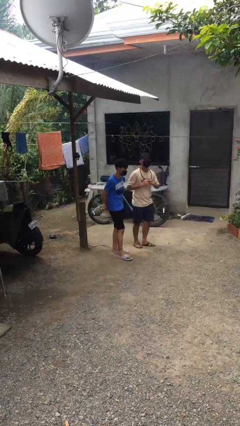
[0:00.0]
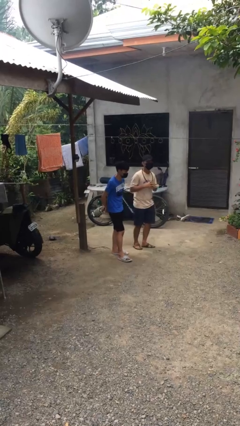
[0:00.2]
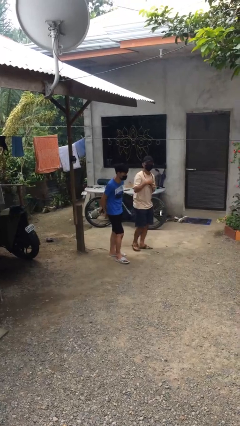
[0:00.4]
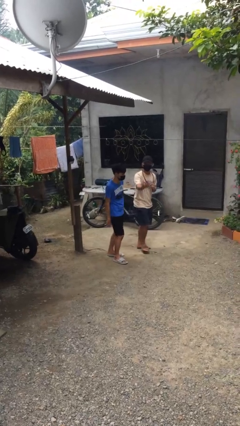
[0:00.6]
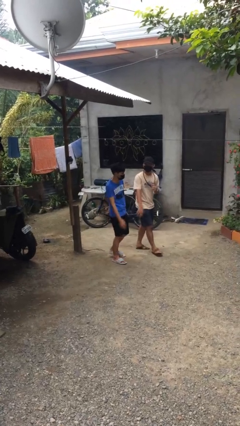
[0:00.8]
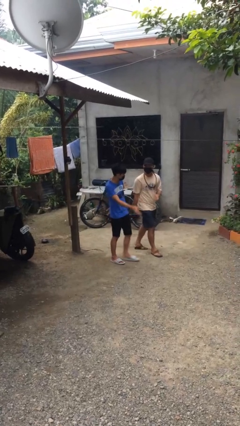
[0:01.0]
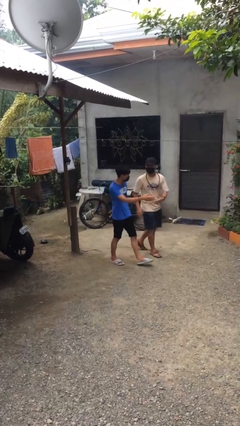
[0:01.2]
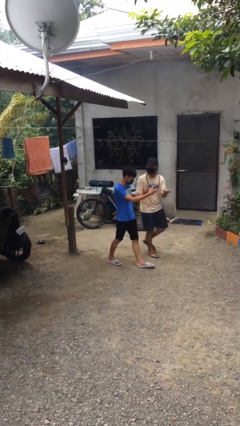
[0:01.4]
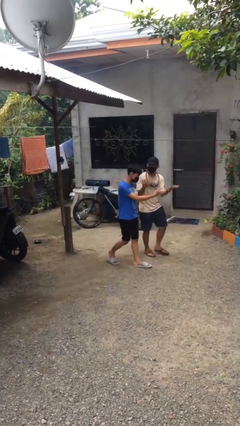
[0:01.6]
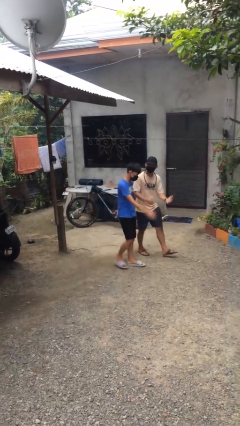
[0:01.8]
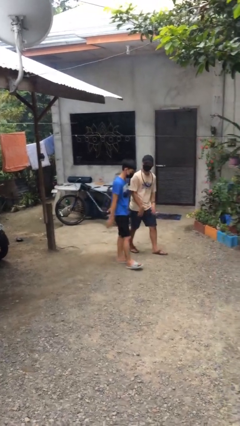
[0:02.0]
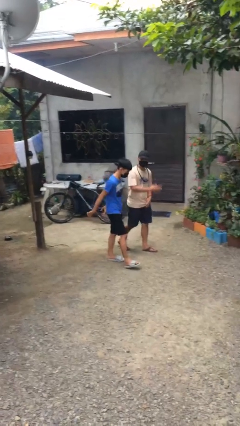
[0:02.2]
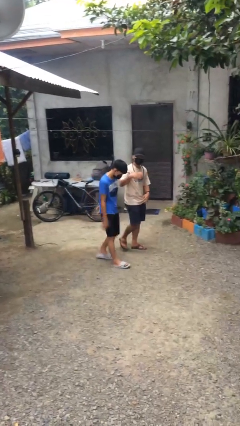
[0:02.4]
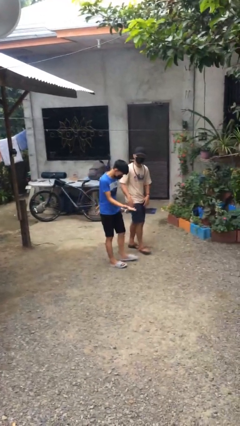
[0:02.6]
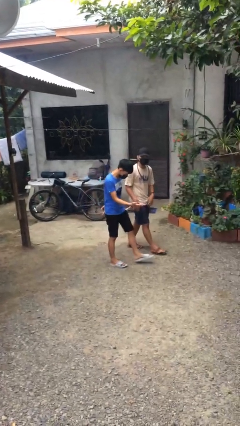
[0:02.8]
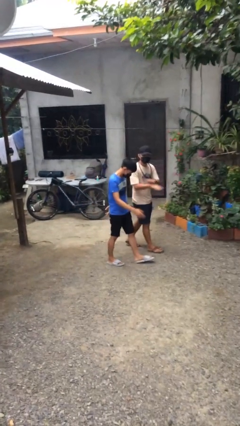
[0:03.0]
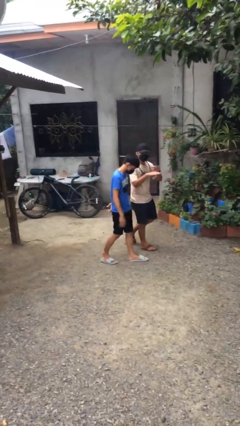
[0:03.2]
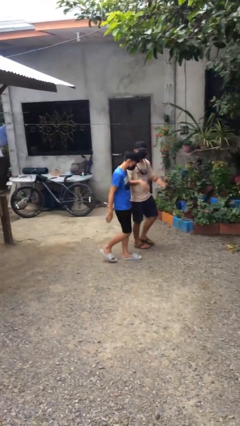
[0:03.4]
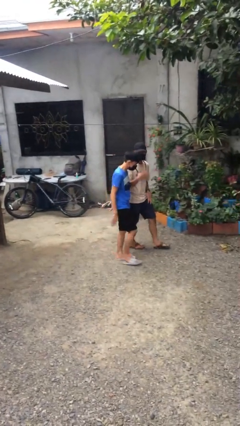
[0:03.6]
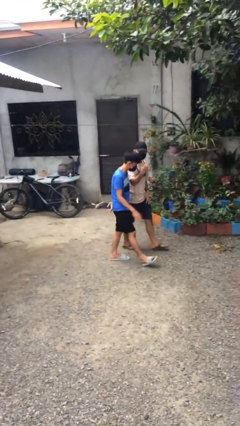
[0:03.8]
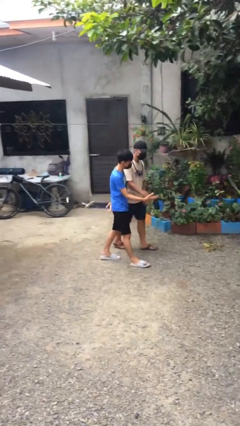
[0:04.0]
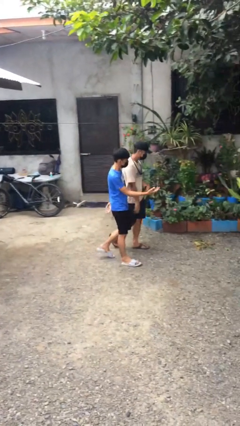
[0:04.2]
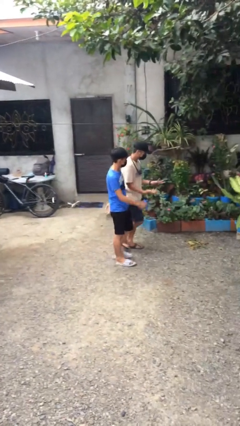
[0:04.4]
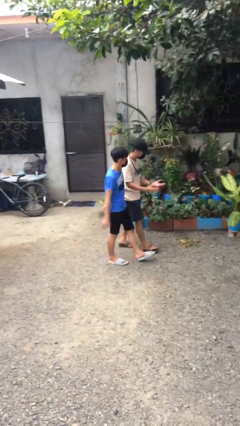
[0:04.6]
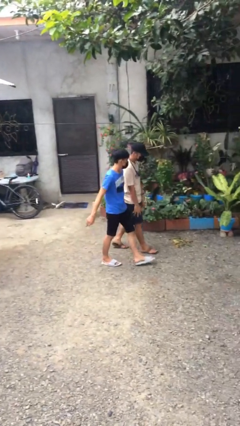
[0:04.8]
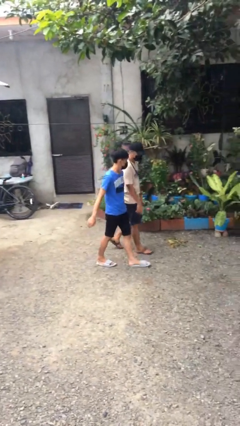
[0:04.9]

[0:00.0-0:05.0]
person talks to person

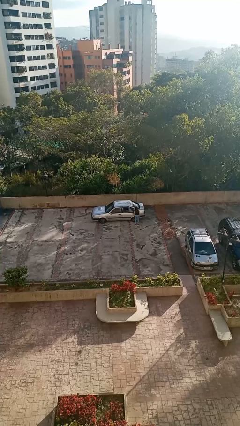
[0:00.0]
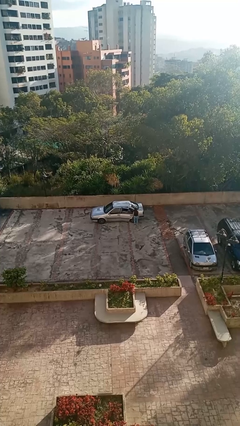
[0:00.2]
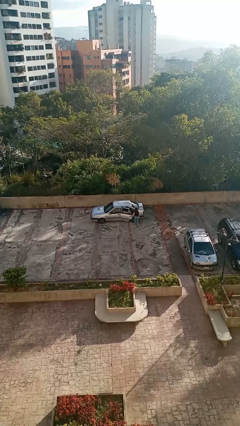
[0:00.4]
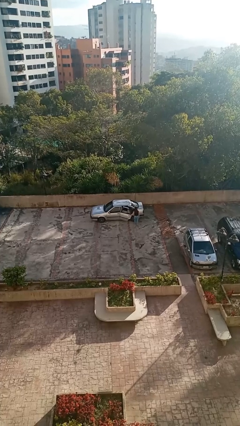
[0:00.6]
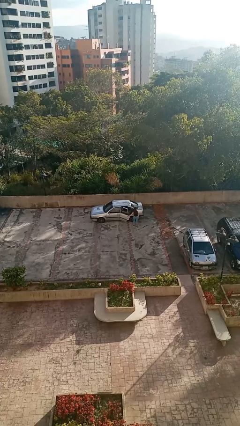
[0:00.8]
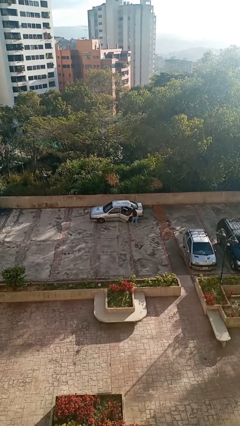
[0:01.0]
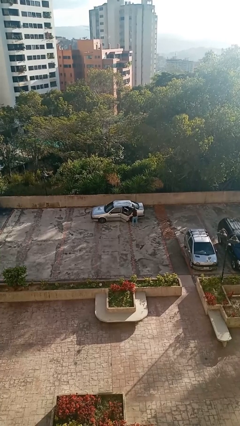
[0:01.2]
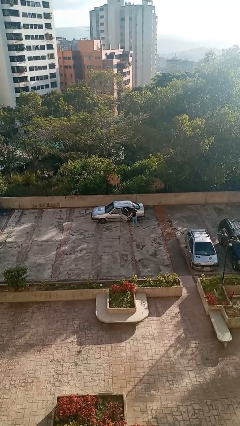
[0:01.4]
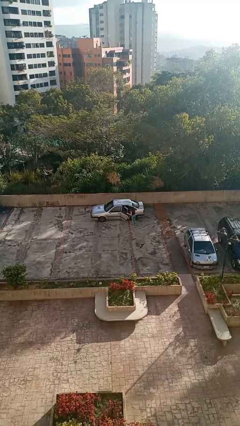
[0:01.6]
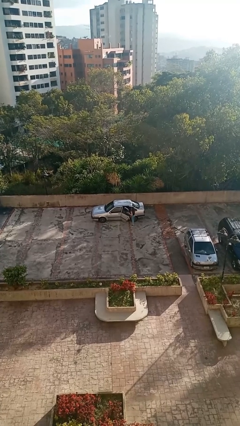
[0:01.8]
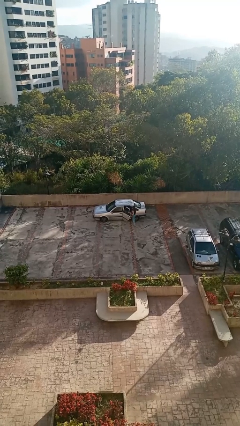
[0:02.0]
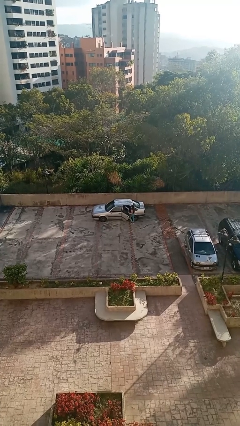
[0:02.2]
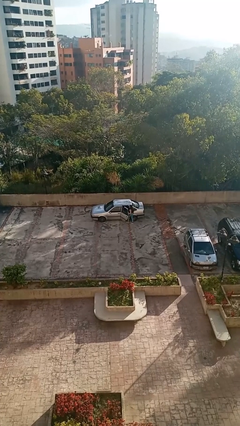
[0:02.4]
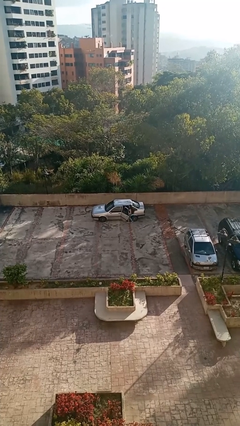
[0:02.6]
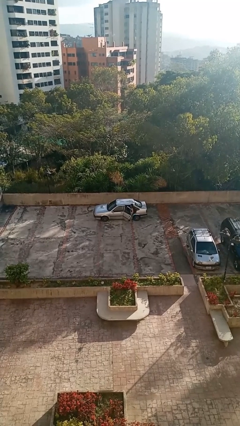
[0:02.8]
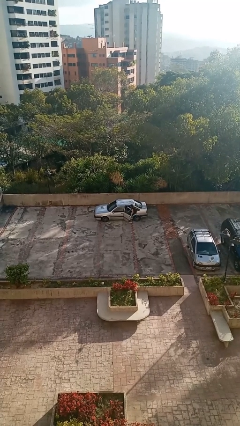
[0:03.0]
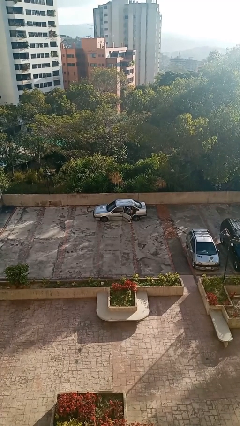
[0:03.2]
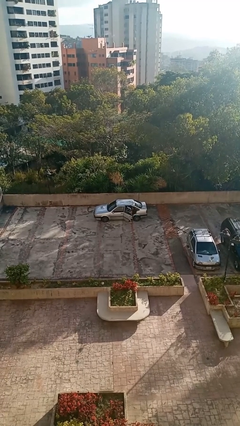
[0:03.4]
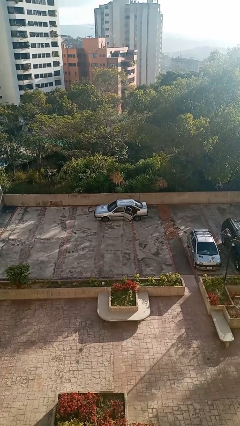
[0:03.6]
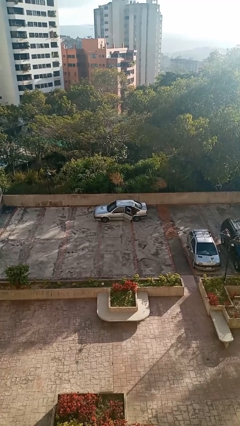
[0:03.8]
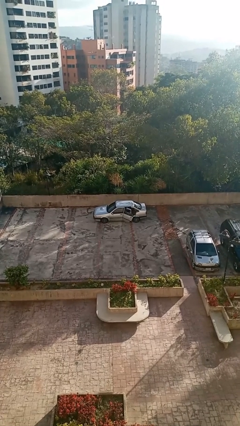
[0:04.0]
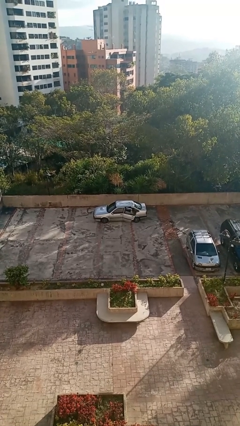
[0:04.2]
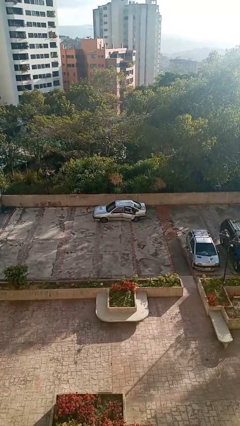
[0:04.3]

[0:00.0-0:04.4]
car picks up person

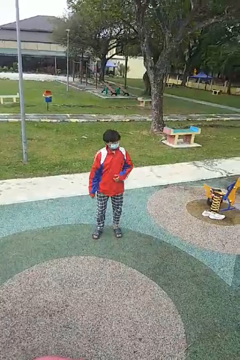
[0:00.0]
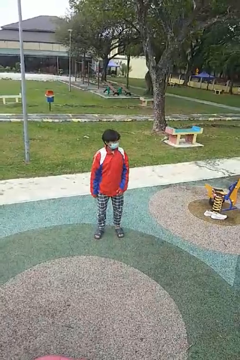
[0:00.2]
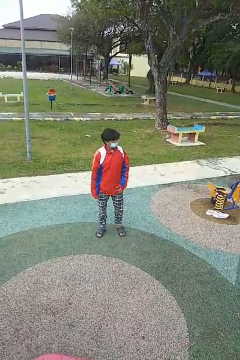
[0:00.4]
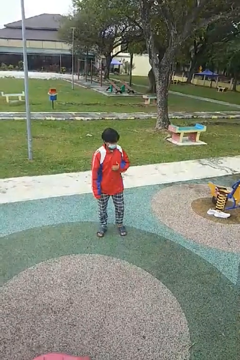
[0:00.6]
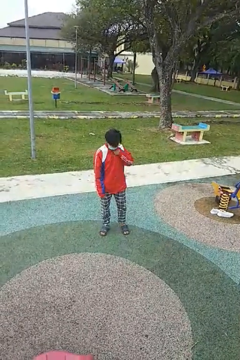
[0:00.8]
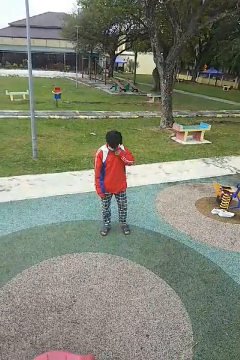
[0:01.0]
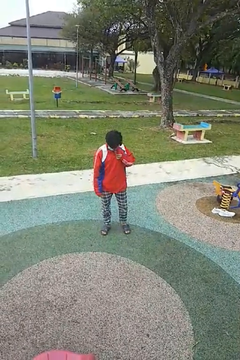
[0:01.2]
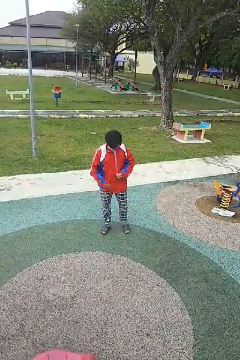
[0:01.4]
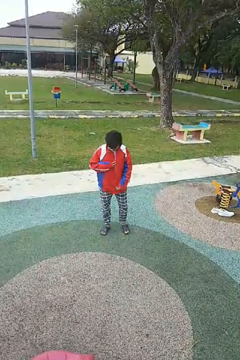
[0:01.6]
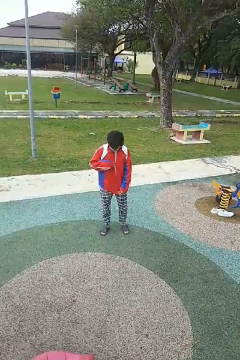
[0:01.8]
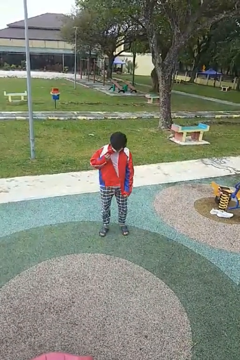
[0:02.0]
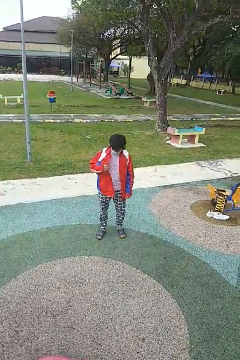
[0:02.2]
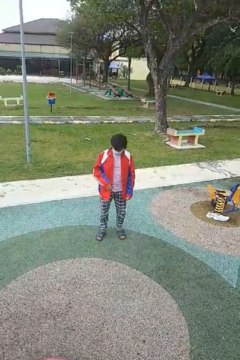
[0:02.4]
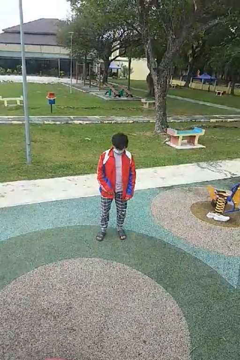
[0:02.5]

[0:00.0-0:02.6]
person unzips jacket

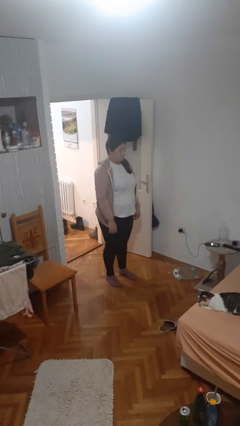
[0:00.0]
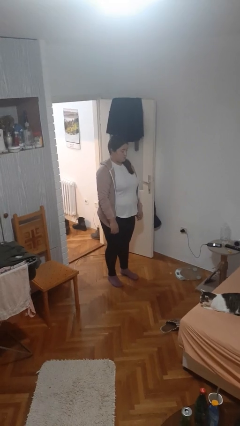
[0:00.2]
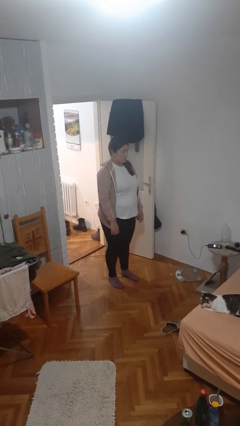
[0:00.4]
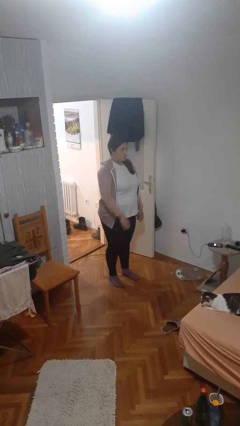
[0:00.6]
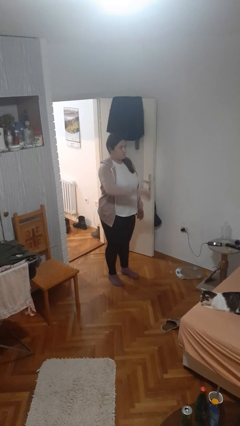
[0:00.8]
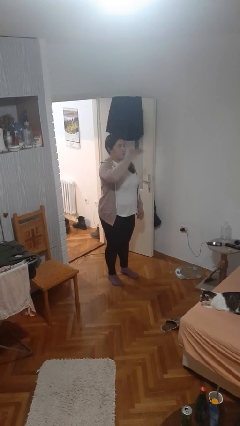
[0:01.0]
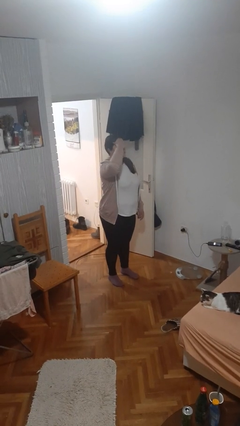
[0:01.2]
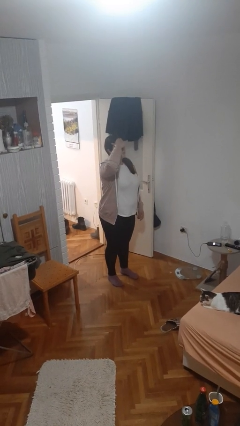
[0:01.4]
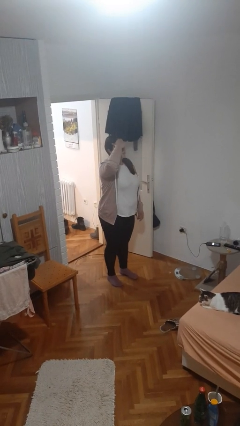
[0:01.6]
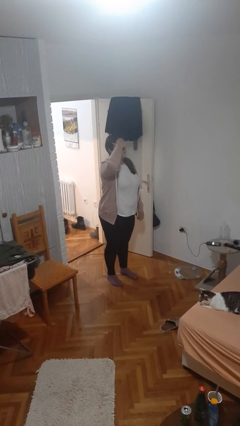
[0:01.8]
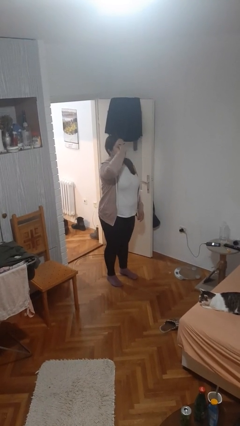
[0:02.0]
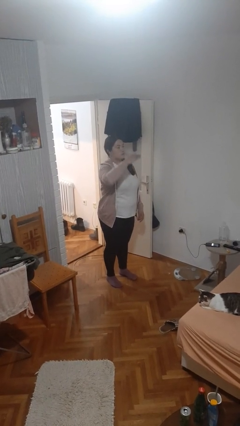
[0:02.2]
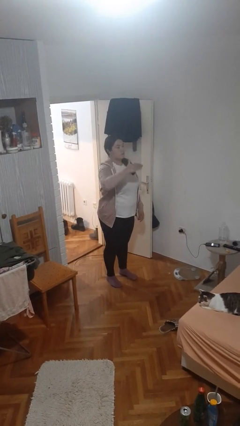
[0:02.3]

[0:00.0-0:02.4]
person shades eyes

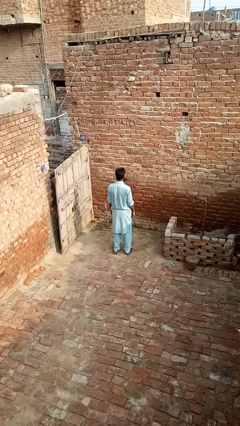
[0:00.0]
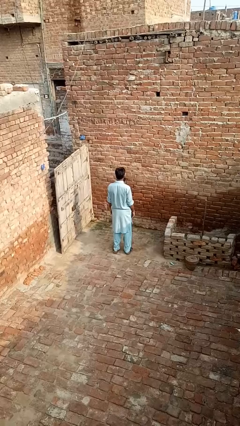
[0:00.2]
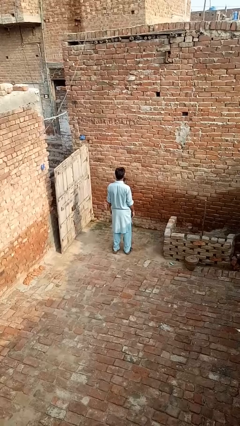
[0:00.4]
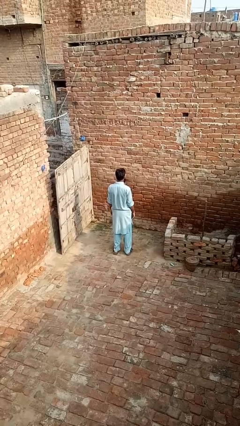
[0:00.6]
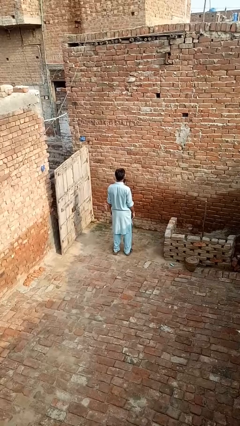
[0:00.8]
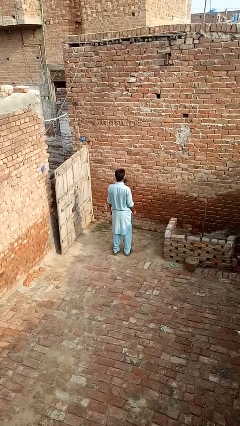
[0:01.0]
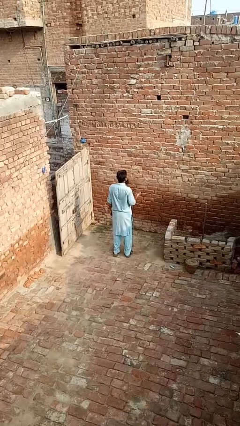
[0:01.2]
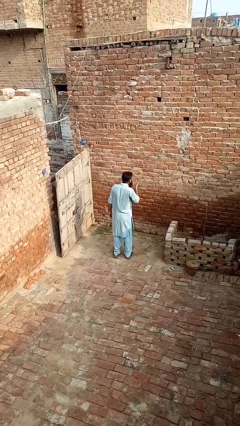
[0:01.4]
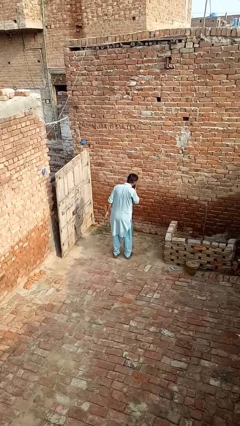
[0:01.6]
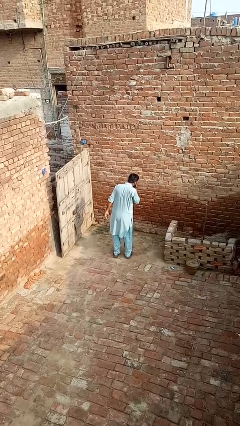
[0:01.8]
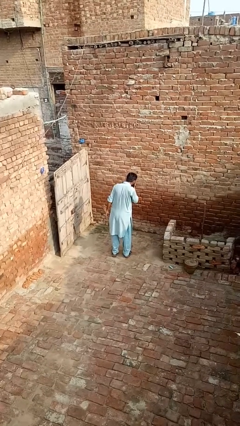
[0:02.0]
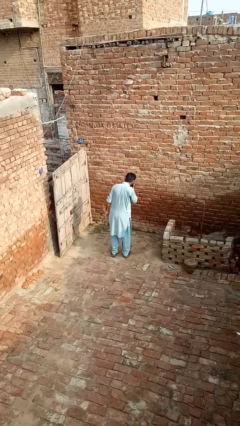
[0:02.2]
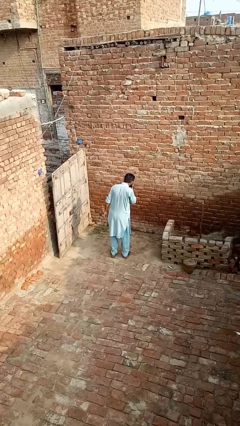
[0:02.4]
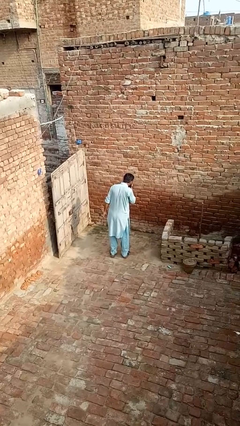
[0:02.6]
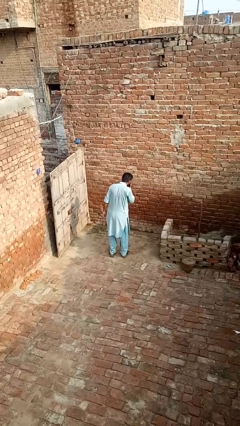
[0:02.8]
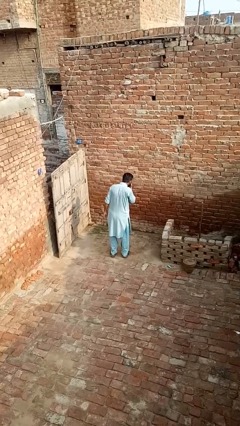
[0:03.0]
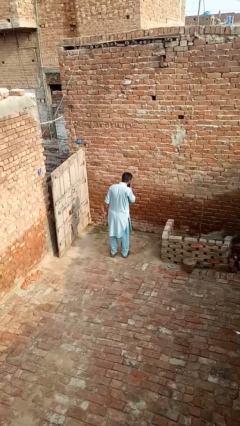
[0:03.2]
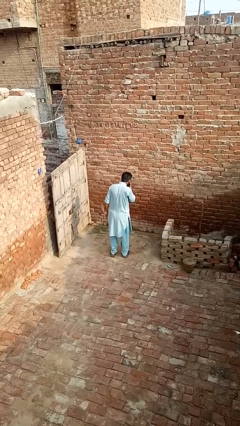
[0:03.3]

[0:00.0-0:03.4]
person sneezes into hand
